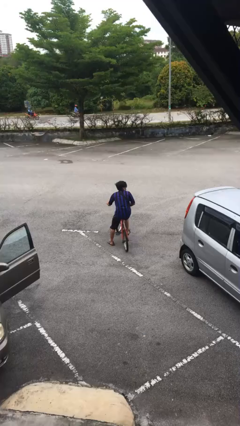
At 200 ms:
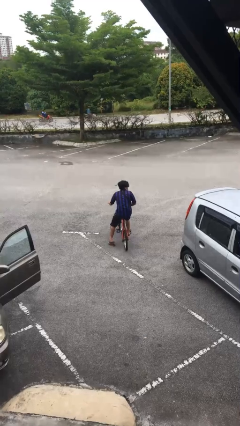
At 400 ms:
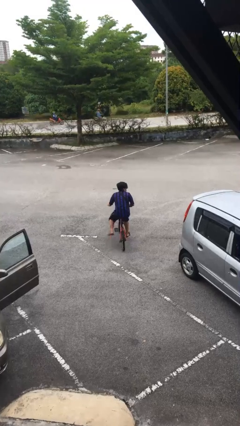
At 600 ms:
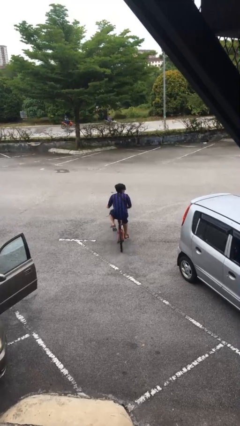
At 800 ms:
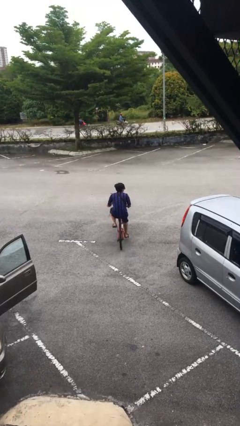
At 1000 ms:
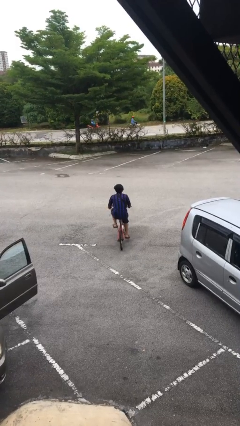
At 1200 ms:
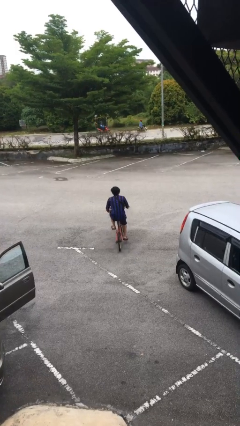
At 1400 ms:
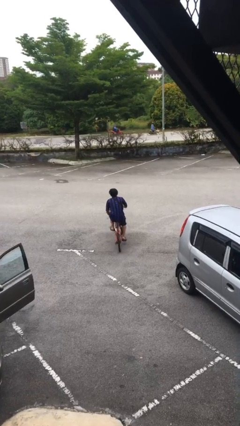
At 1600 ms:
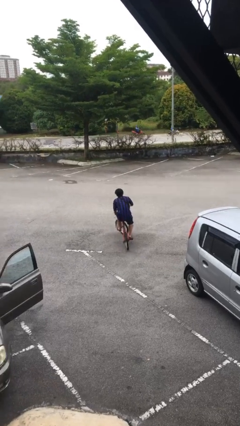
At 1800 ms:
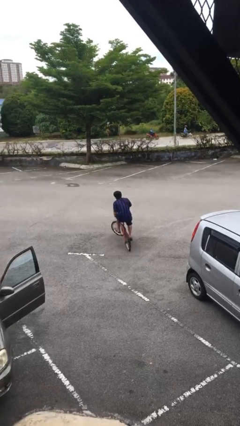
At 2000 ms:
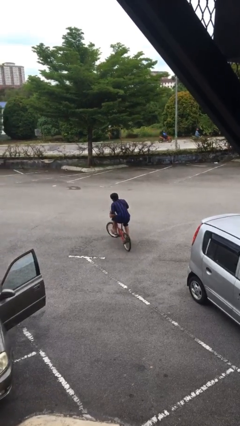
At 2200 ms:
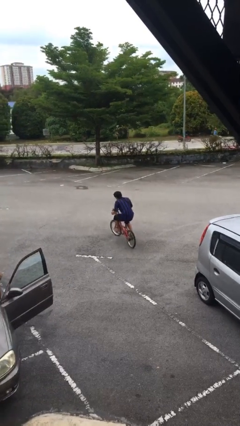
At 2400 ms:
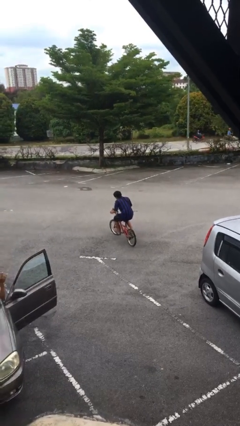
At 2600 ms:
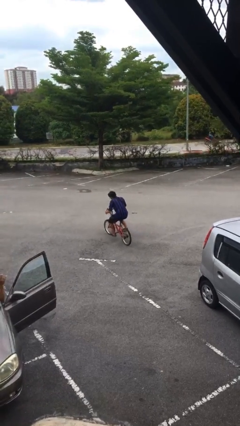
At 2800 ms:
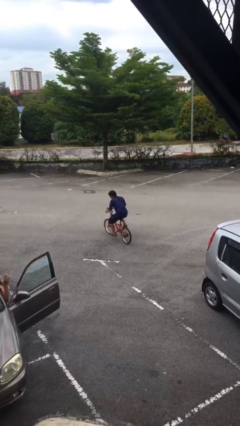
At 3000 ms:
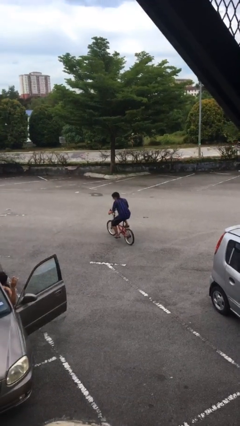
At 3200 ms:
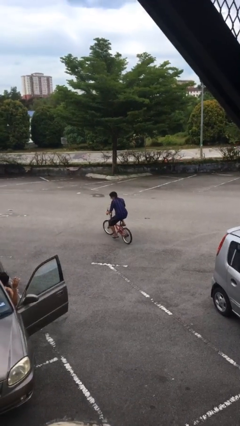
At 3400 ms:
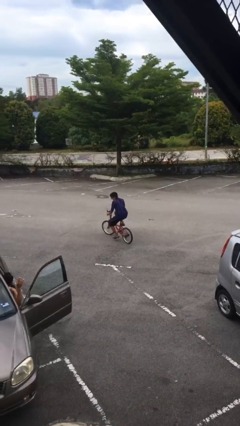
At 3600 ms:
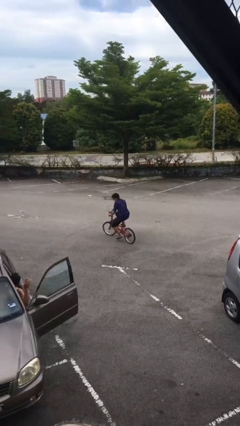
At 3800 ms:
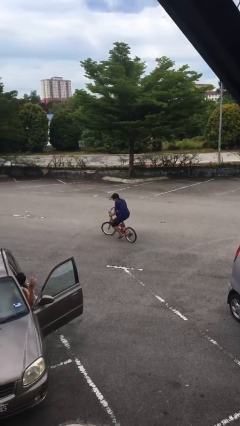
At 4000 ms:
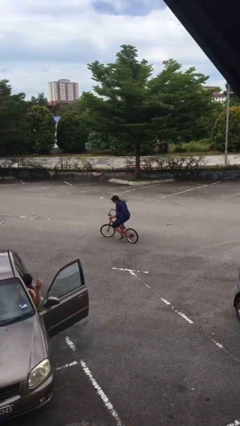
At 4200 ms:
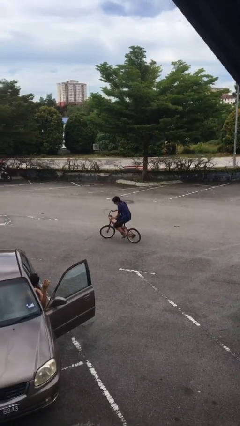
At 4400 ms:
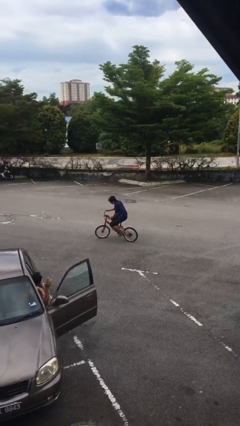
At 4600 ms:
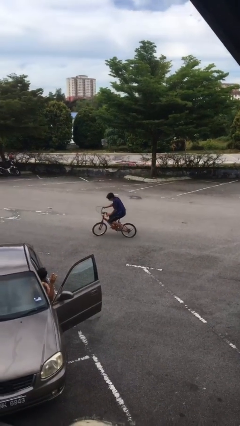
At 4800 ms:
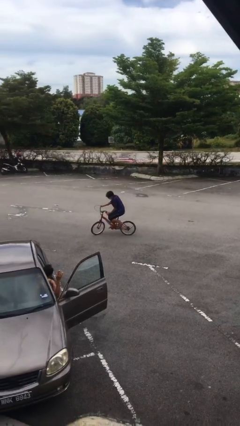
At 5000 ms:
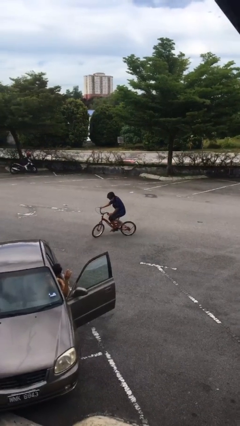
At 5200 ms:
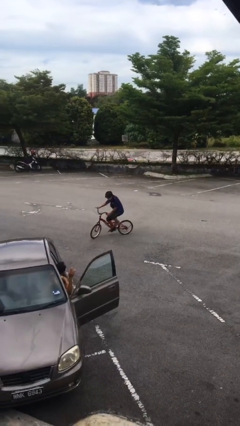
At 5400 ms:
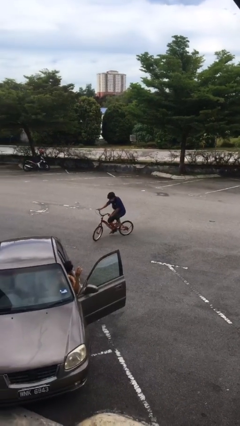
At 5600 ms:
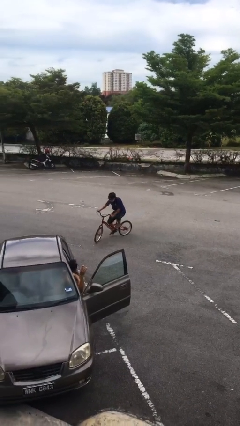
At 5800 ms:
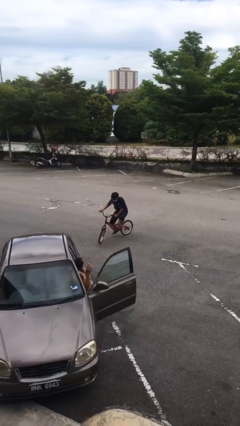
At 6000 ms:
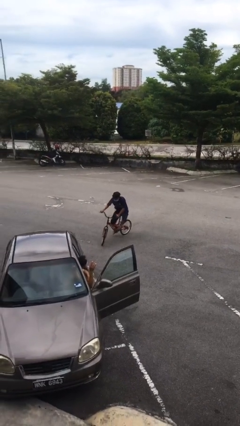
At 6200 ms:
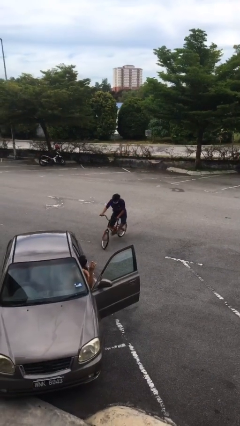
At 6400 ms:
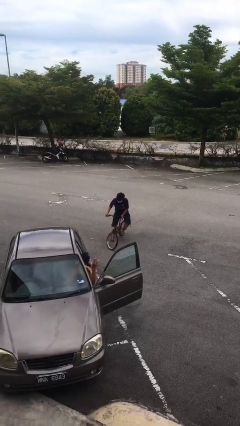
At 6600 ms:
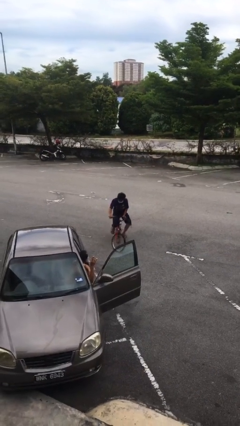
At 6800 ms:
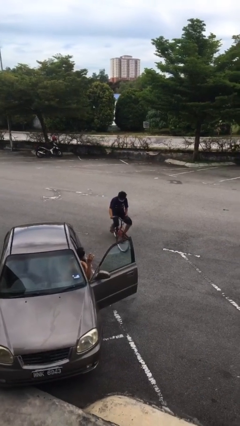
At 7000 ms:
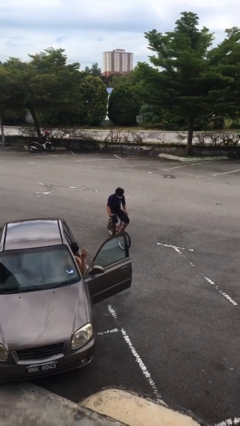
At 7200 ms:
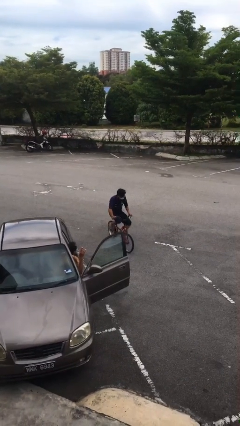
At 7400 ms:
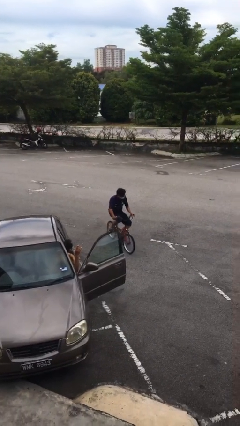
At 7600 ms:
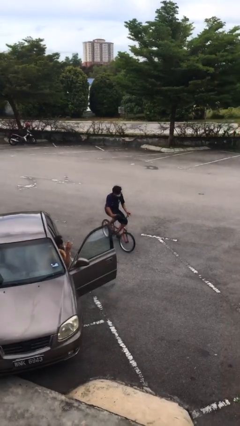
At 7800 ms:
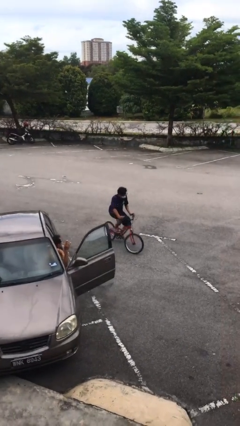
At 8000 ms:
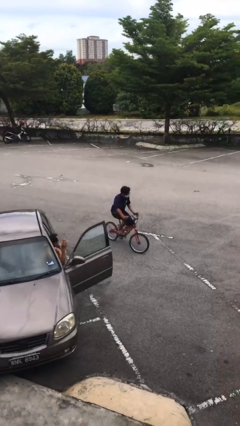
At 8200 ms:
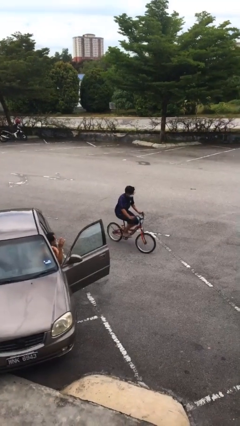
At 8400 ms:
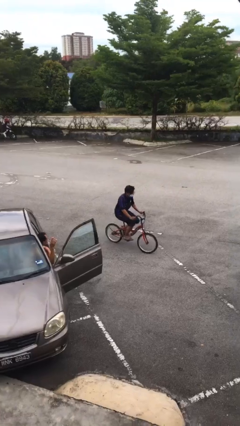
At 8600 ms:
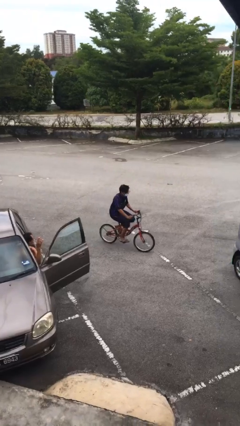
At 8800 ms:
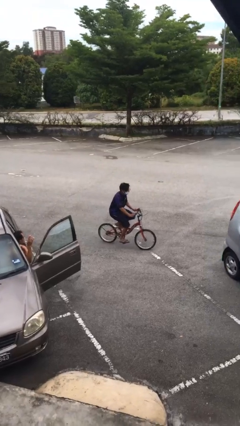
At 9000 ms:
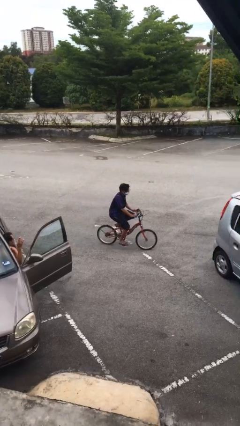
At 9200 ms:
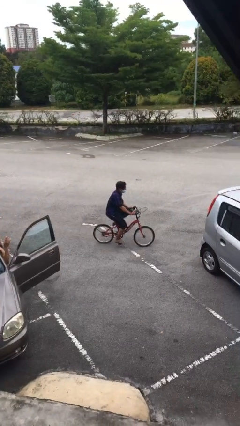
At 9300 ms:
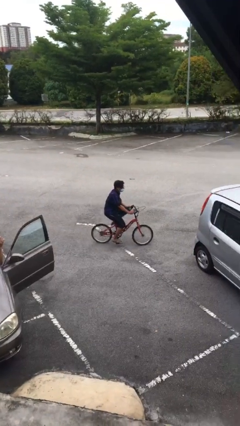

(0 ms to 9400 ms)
person rides bicycle

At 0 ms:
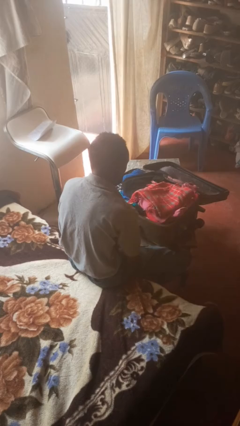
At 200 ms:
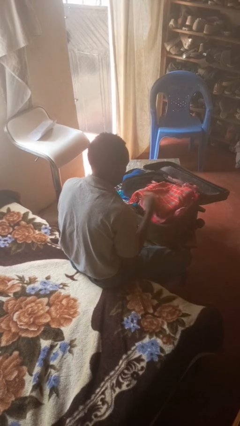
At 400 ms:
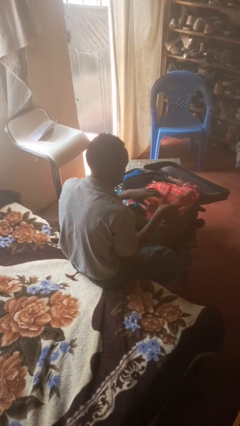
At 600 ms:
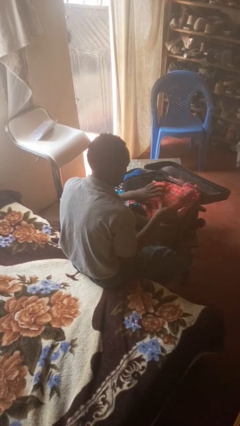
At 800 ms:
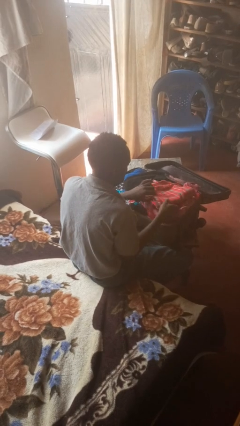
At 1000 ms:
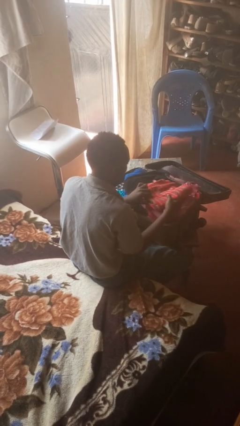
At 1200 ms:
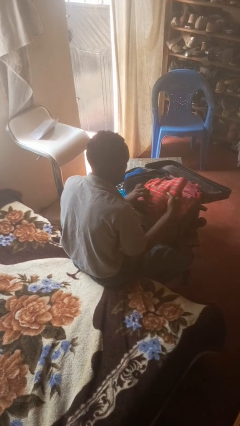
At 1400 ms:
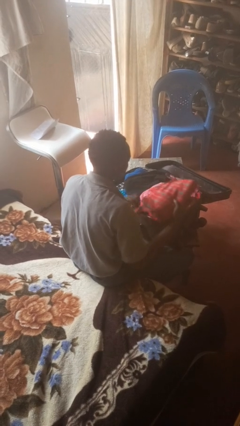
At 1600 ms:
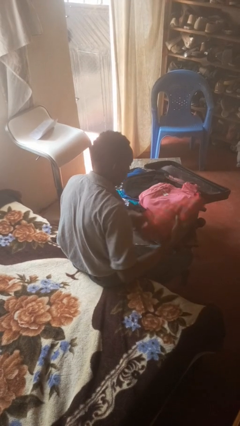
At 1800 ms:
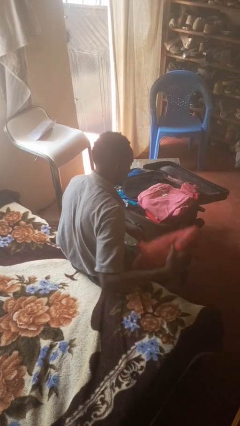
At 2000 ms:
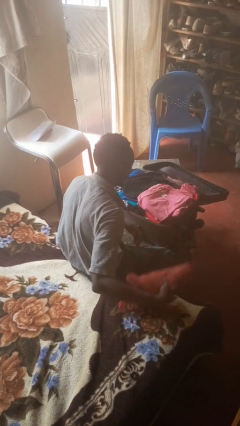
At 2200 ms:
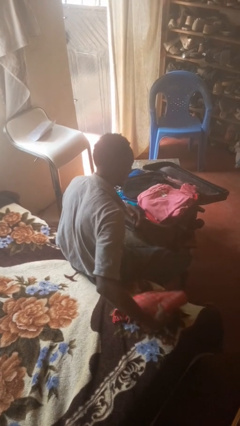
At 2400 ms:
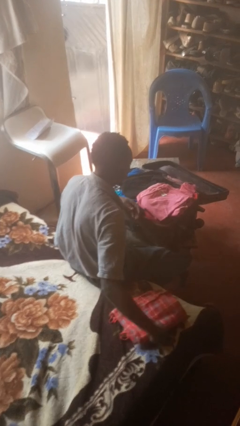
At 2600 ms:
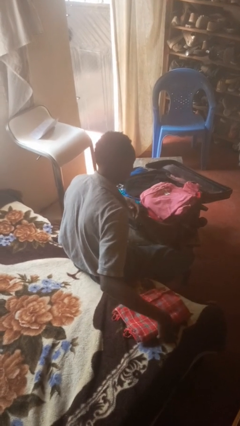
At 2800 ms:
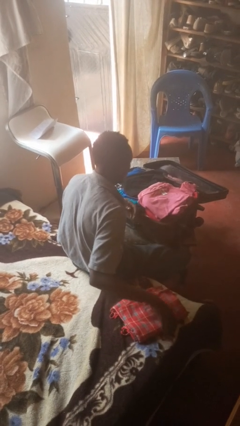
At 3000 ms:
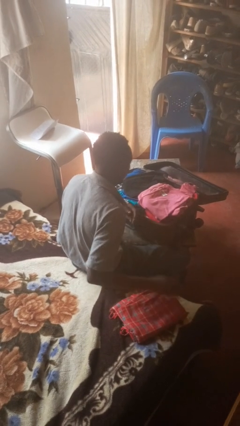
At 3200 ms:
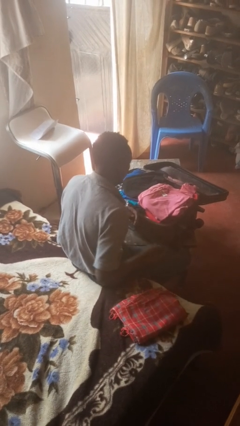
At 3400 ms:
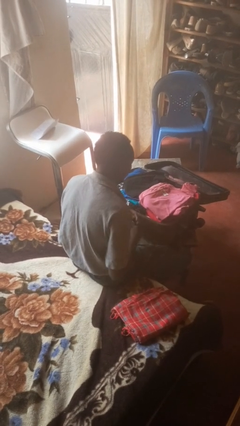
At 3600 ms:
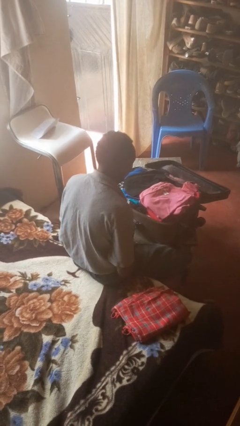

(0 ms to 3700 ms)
person unloads clothes from suitcase

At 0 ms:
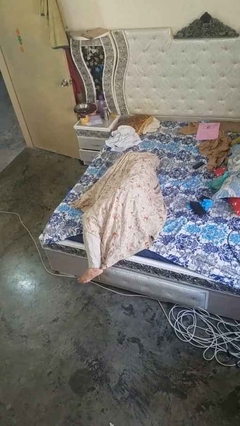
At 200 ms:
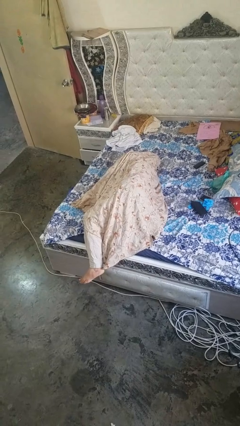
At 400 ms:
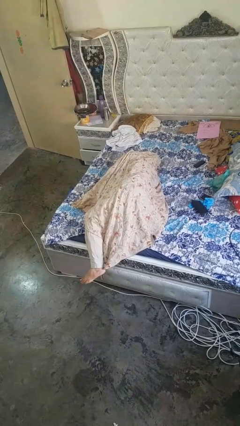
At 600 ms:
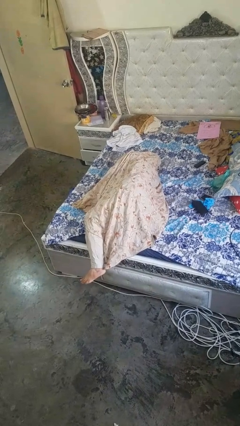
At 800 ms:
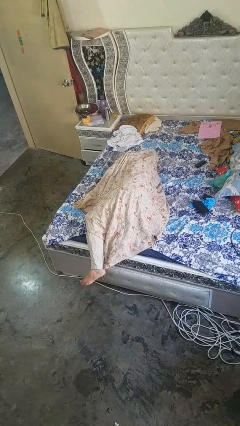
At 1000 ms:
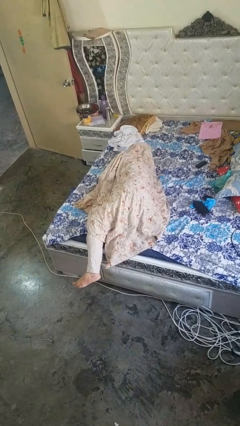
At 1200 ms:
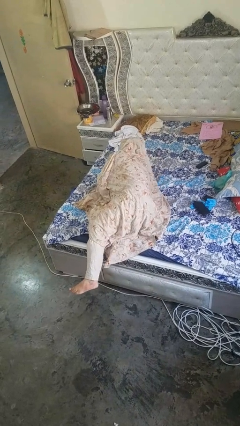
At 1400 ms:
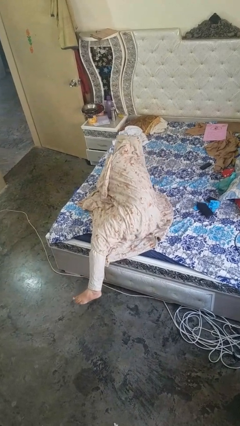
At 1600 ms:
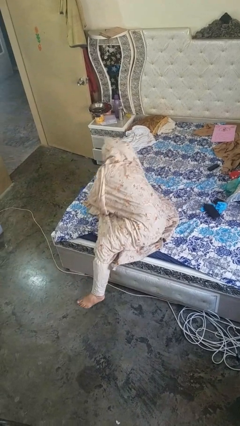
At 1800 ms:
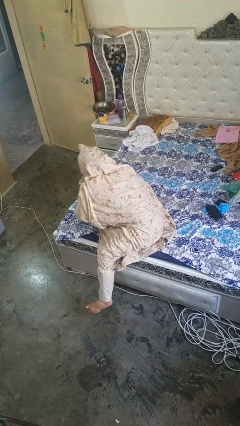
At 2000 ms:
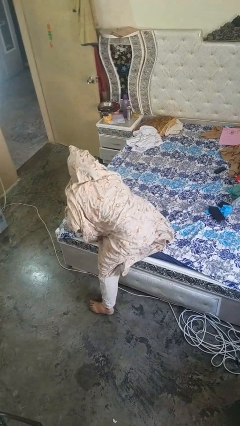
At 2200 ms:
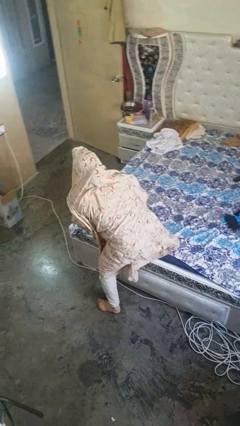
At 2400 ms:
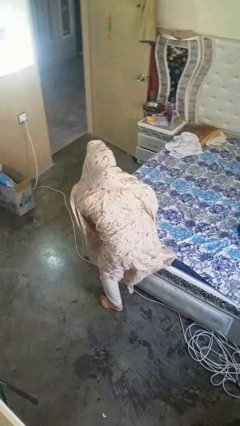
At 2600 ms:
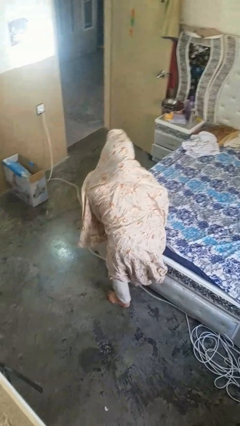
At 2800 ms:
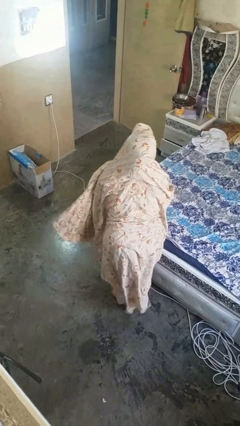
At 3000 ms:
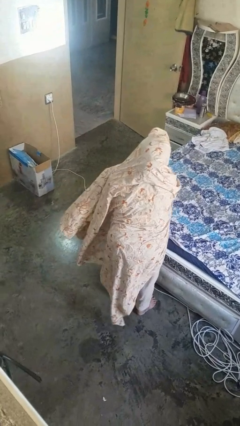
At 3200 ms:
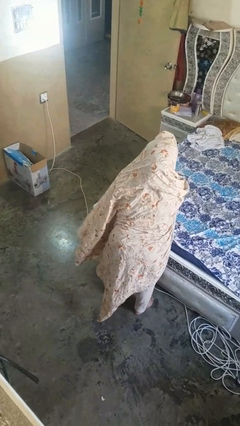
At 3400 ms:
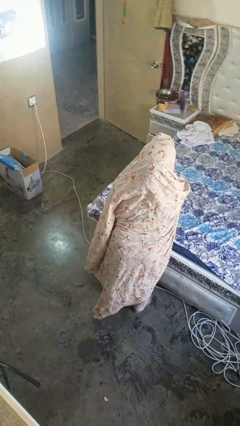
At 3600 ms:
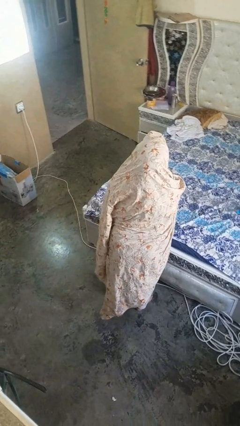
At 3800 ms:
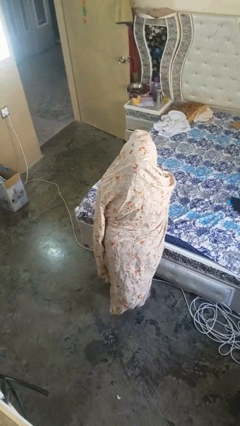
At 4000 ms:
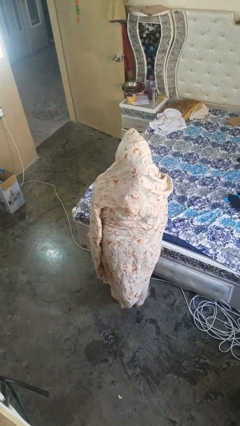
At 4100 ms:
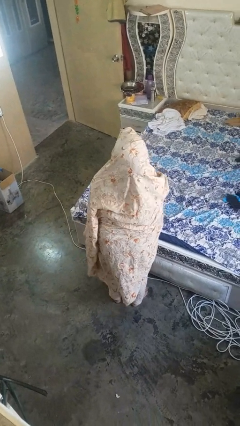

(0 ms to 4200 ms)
person stands up

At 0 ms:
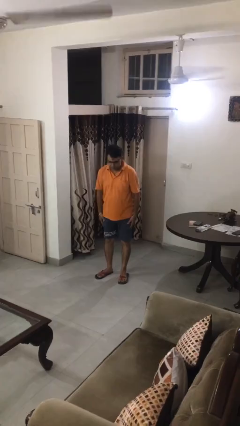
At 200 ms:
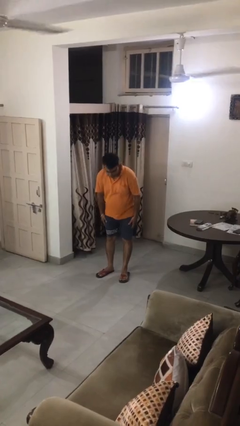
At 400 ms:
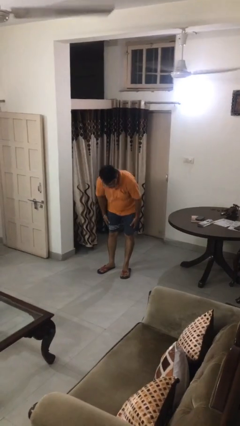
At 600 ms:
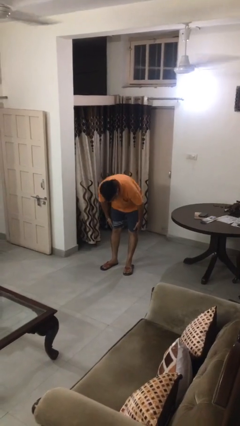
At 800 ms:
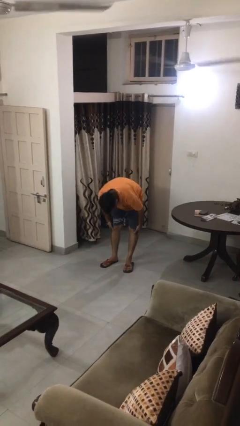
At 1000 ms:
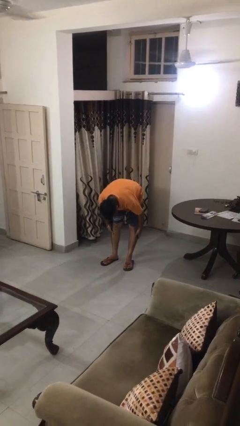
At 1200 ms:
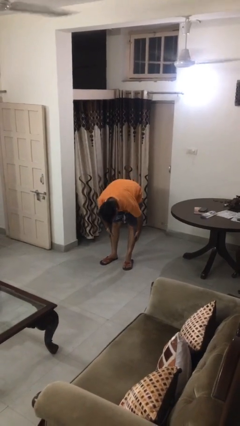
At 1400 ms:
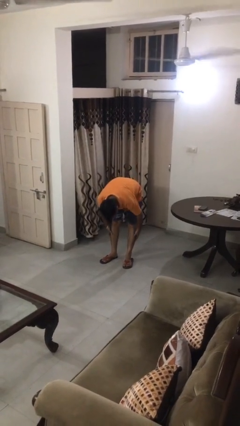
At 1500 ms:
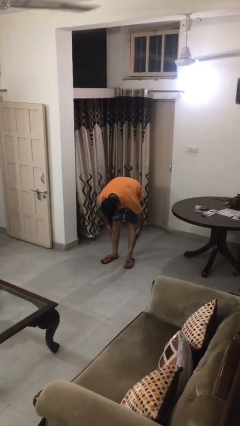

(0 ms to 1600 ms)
person bows
